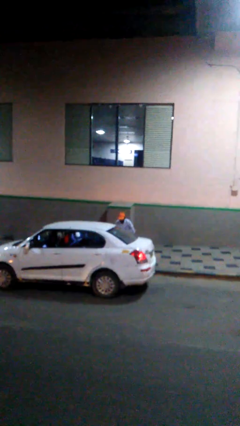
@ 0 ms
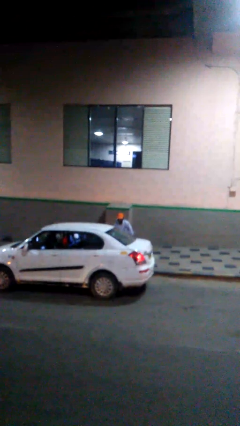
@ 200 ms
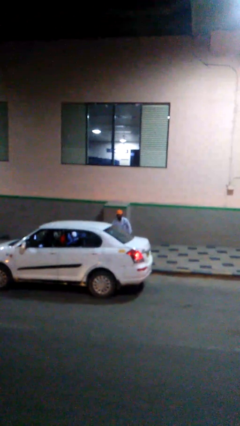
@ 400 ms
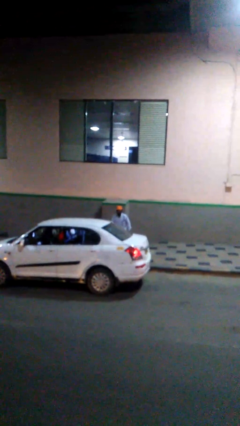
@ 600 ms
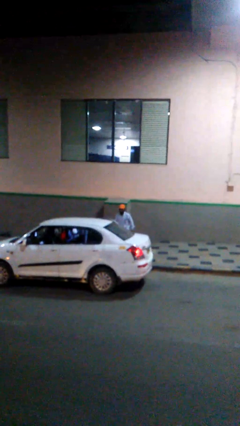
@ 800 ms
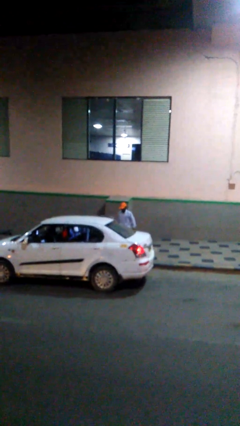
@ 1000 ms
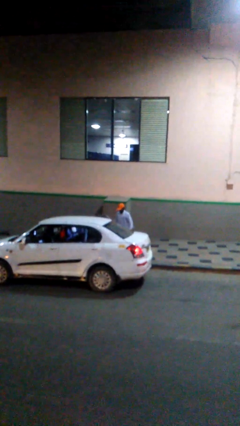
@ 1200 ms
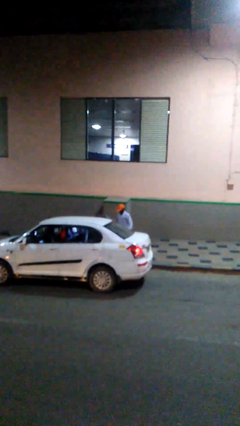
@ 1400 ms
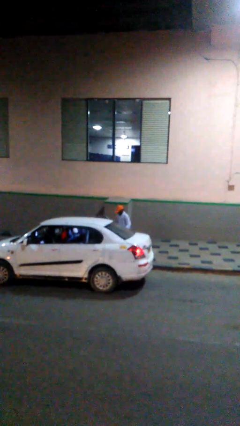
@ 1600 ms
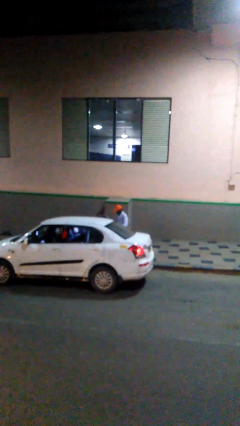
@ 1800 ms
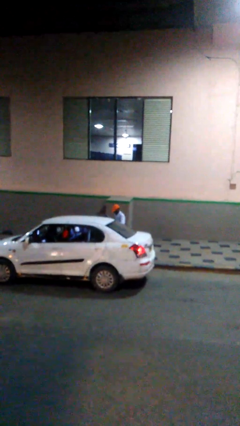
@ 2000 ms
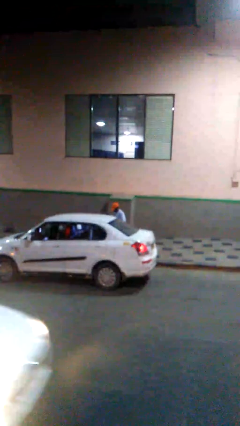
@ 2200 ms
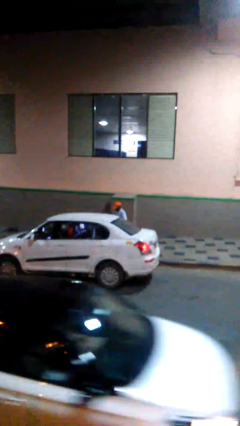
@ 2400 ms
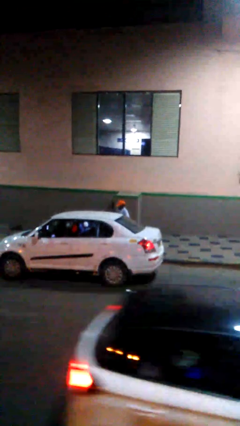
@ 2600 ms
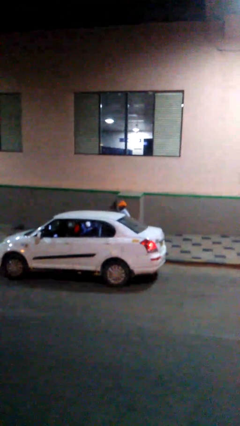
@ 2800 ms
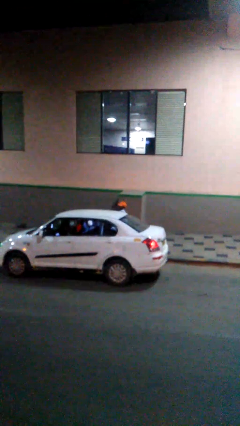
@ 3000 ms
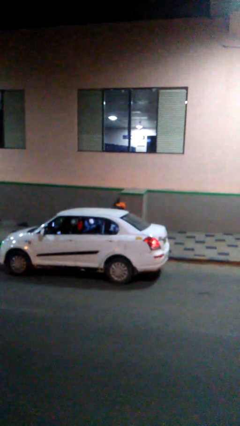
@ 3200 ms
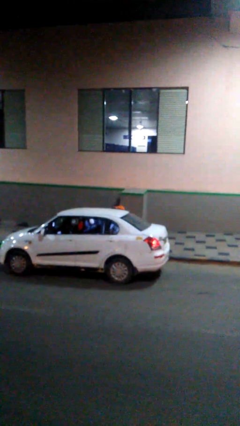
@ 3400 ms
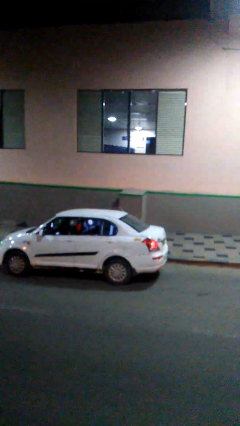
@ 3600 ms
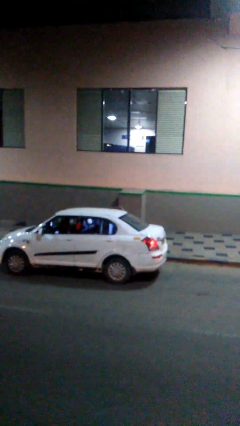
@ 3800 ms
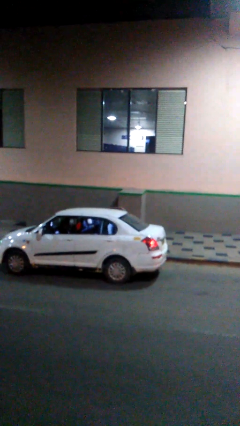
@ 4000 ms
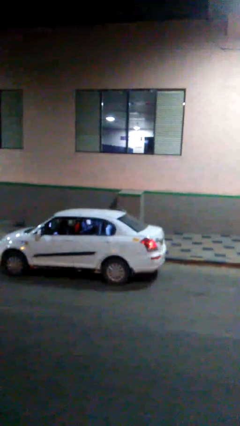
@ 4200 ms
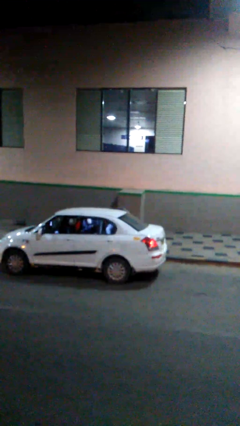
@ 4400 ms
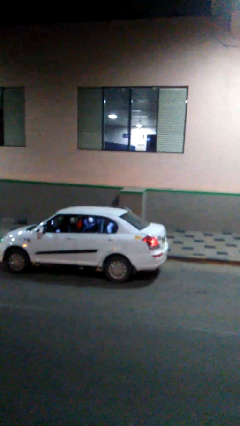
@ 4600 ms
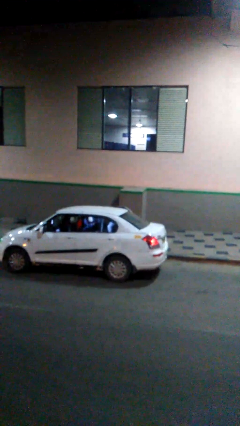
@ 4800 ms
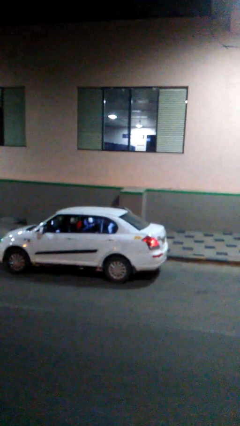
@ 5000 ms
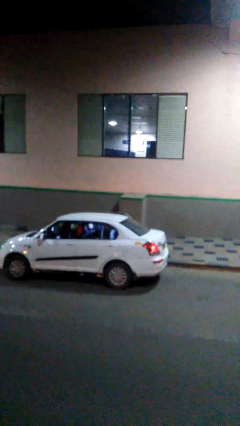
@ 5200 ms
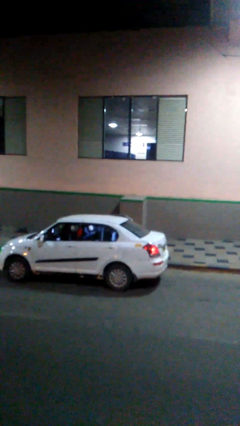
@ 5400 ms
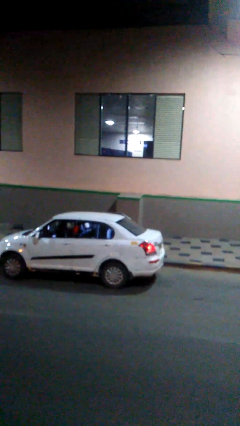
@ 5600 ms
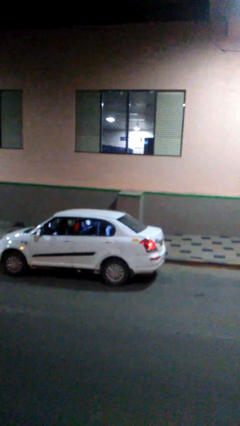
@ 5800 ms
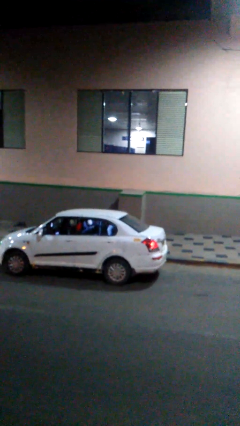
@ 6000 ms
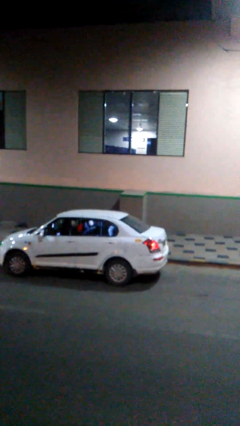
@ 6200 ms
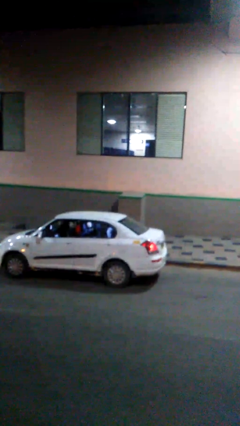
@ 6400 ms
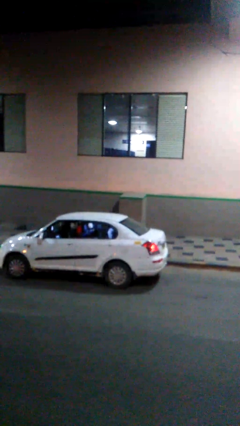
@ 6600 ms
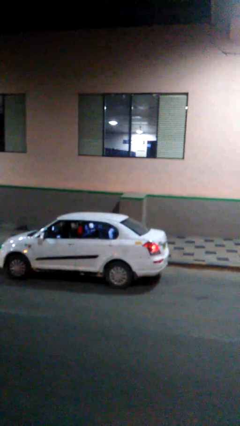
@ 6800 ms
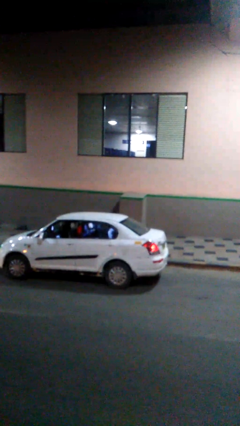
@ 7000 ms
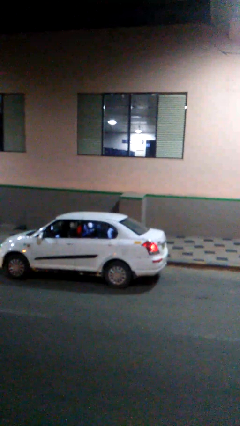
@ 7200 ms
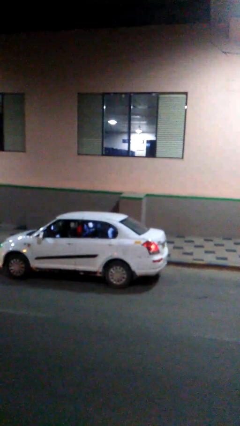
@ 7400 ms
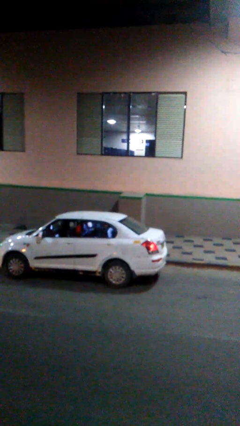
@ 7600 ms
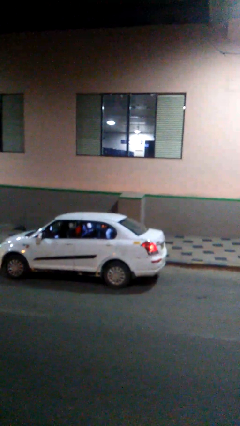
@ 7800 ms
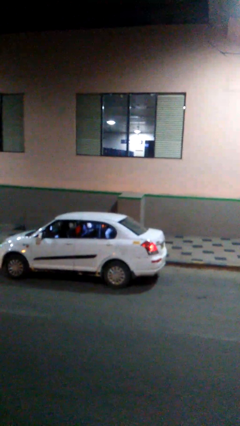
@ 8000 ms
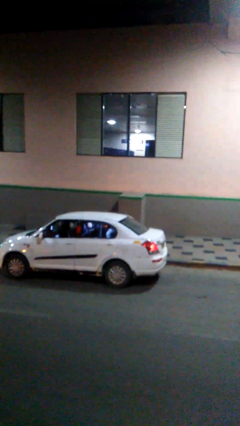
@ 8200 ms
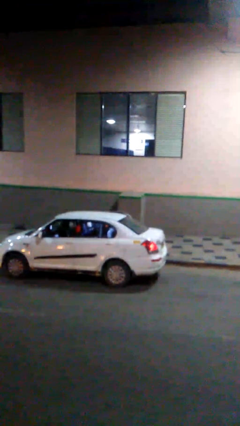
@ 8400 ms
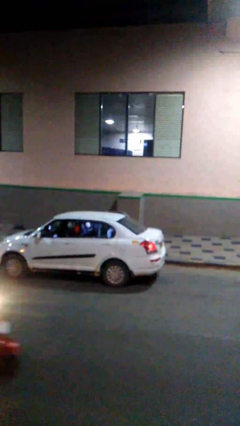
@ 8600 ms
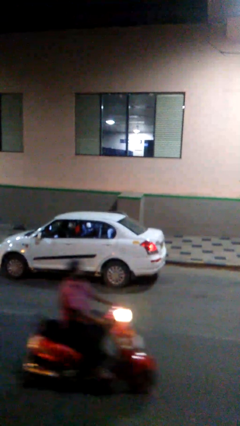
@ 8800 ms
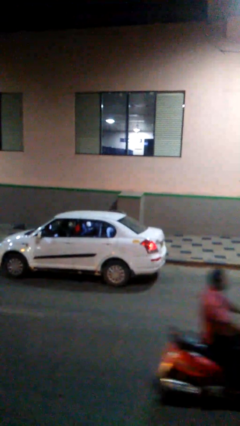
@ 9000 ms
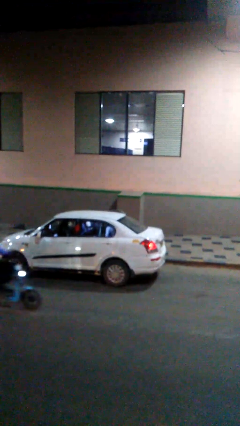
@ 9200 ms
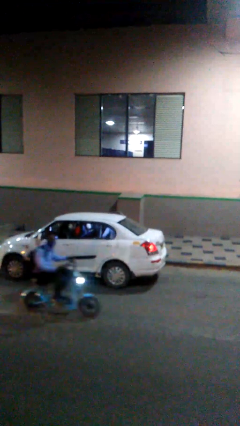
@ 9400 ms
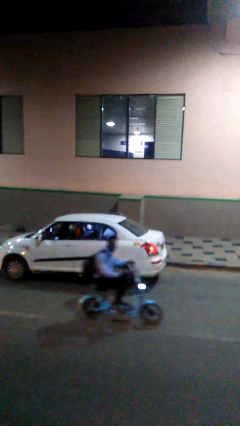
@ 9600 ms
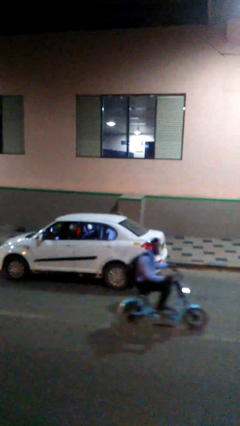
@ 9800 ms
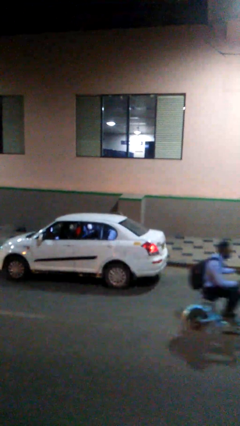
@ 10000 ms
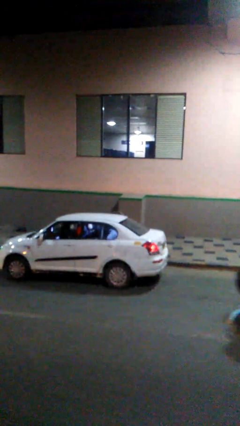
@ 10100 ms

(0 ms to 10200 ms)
person enters car

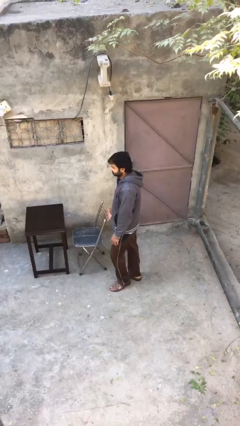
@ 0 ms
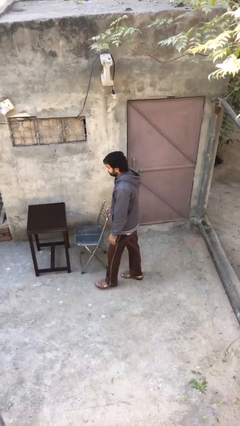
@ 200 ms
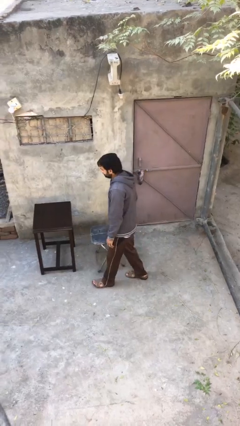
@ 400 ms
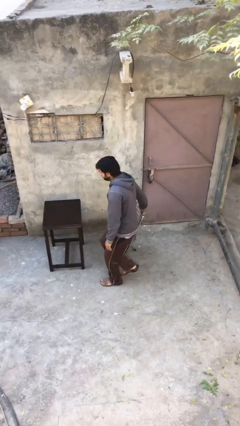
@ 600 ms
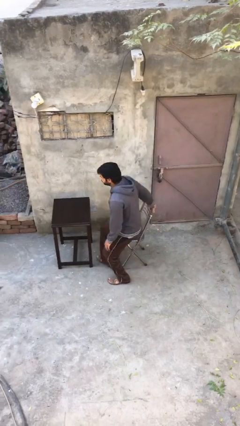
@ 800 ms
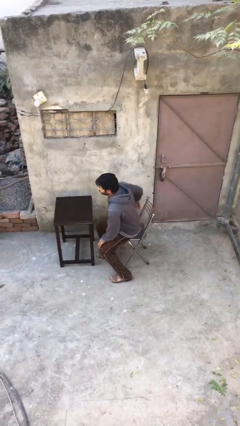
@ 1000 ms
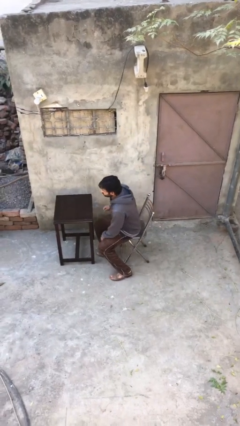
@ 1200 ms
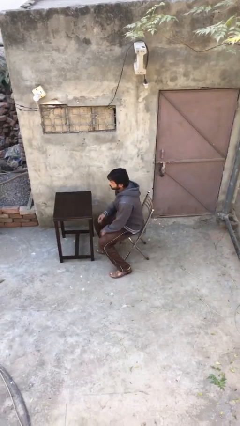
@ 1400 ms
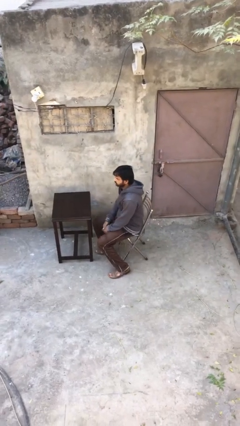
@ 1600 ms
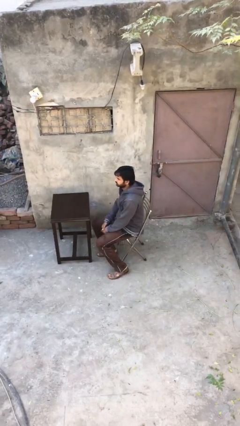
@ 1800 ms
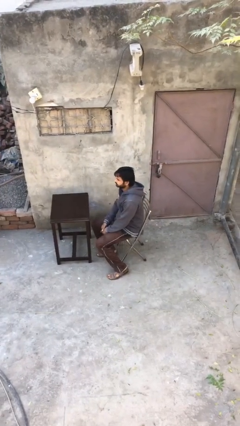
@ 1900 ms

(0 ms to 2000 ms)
person sits down

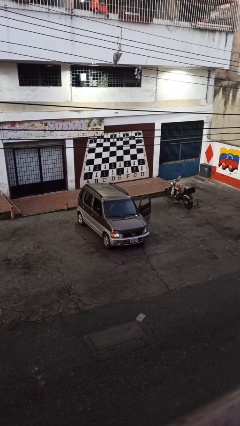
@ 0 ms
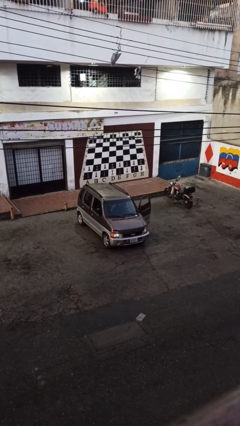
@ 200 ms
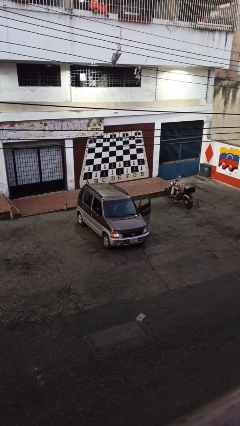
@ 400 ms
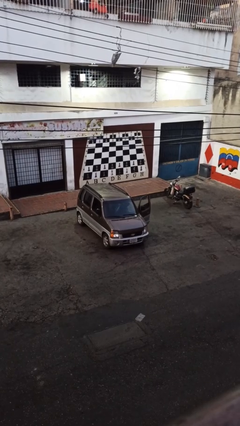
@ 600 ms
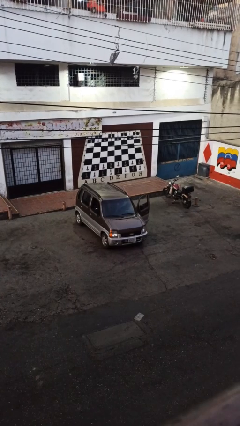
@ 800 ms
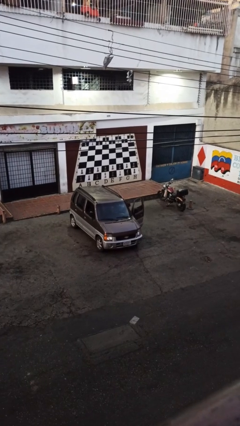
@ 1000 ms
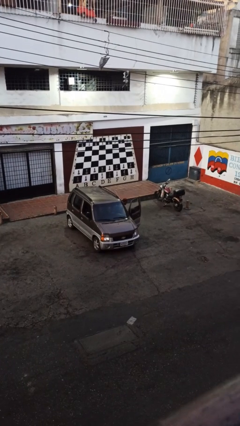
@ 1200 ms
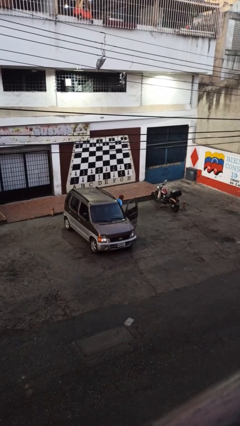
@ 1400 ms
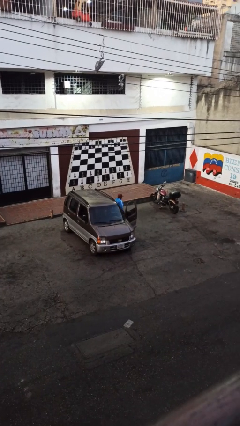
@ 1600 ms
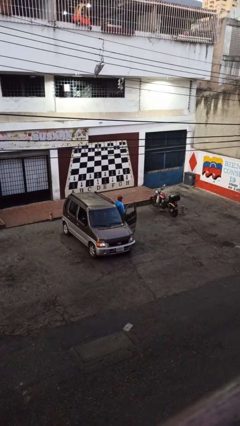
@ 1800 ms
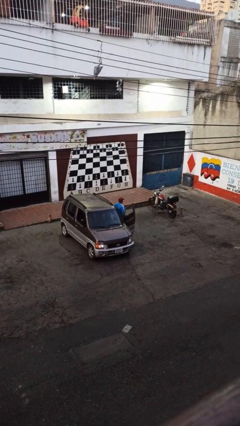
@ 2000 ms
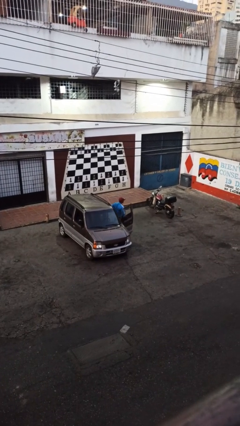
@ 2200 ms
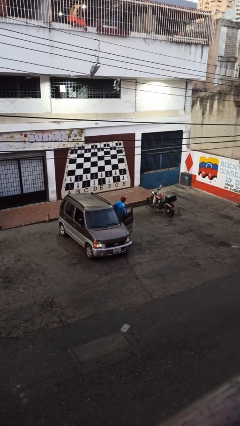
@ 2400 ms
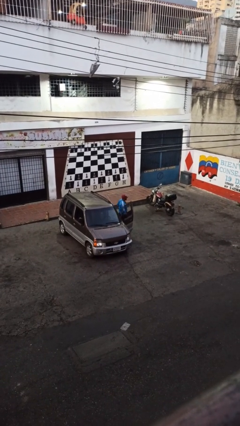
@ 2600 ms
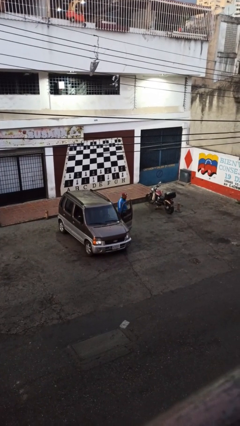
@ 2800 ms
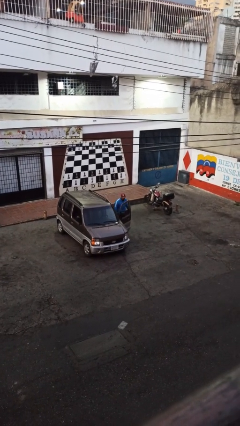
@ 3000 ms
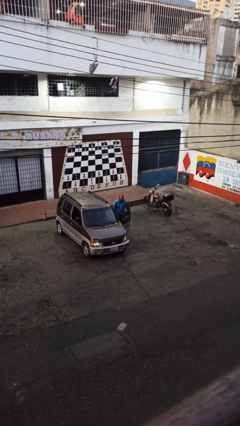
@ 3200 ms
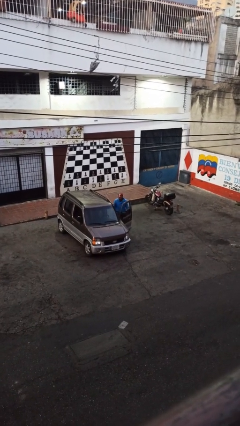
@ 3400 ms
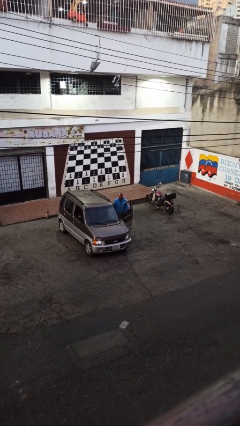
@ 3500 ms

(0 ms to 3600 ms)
person exits car

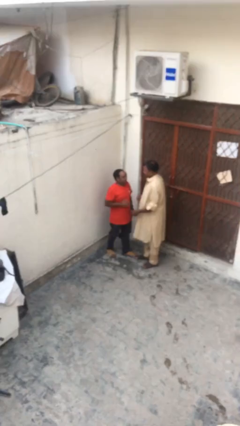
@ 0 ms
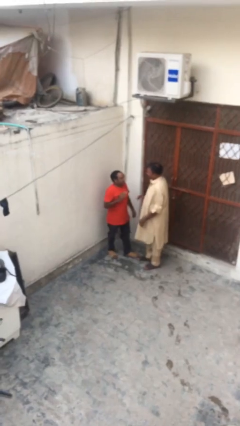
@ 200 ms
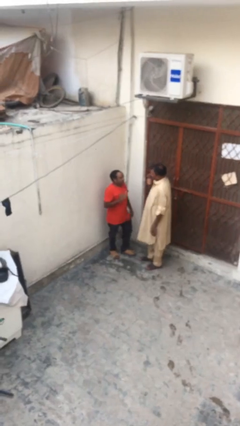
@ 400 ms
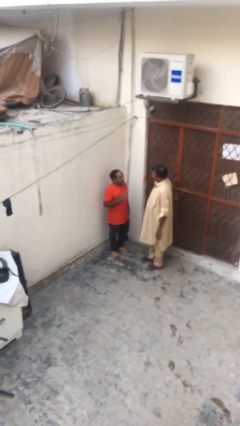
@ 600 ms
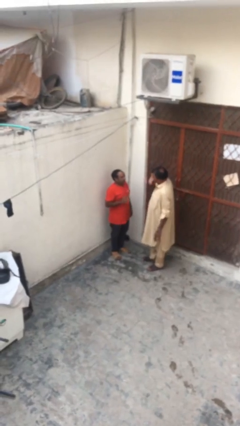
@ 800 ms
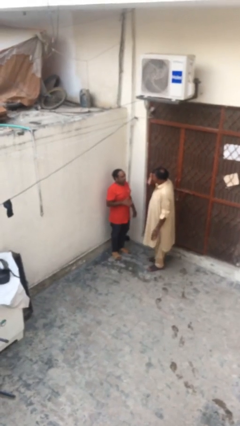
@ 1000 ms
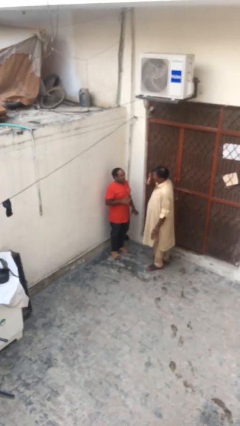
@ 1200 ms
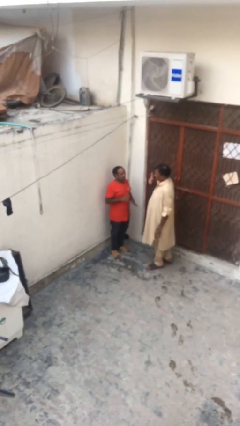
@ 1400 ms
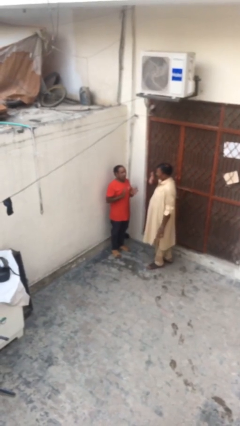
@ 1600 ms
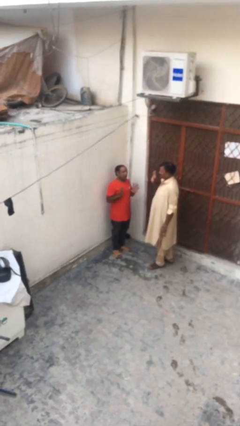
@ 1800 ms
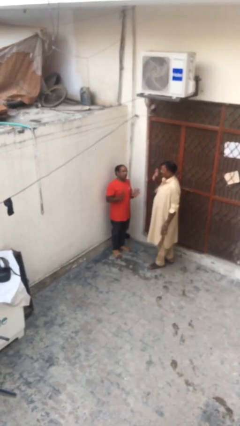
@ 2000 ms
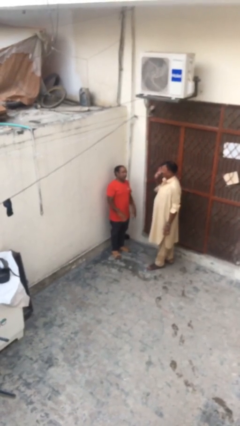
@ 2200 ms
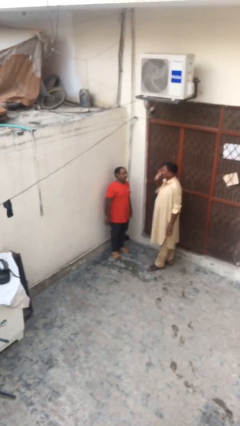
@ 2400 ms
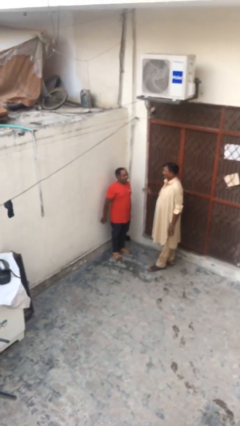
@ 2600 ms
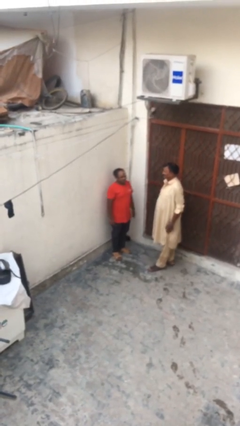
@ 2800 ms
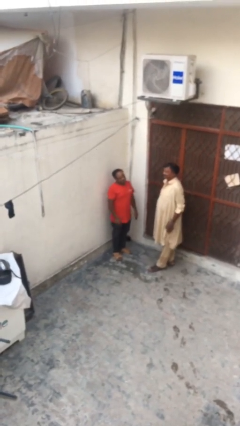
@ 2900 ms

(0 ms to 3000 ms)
person talks to person
